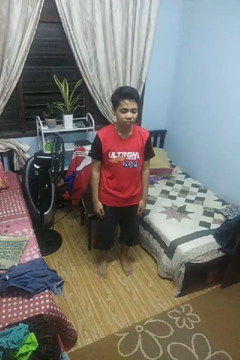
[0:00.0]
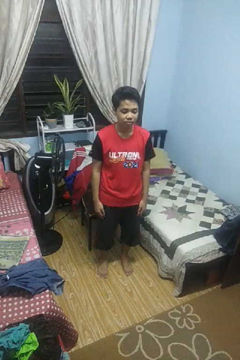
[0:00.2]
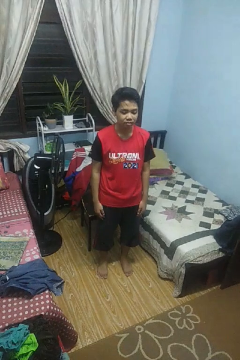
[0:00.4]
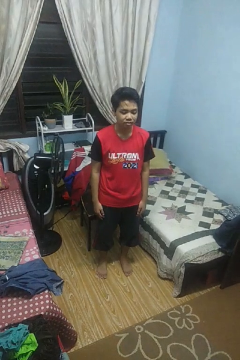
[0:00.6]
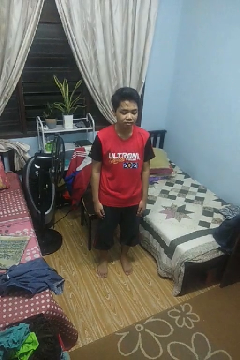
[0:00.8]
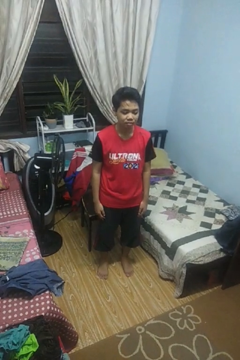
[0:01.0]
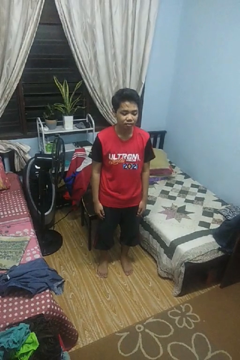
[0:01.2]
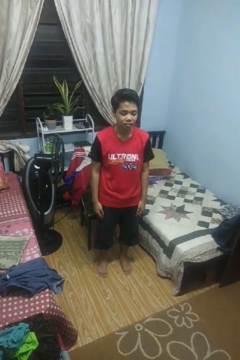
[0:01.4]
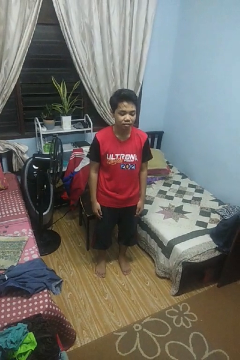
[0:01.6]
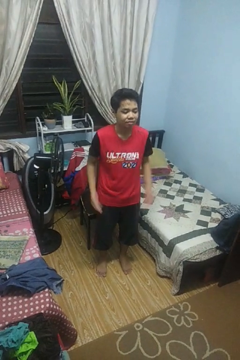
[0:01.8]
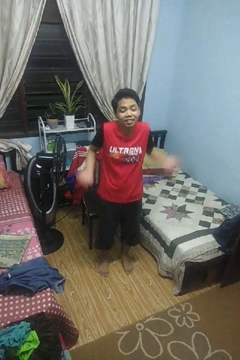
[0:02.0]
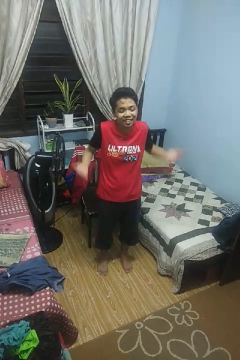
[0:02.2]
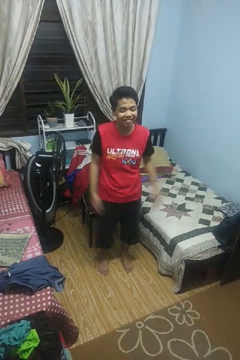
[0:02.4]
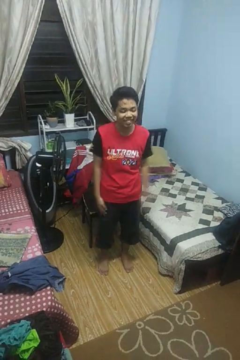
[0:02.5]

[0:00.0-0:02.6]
person shrugs

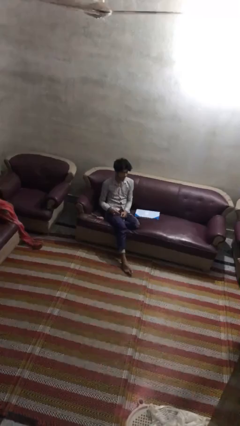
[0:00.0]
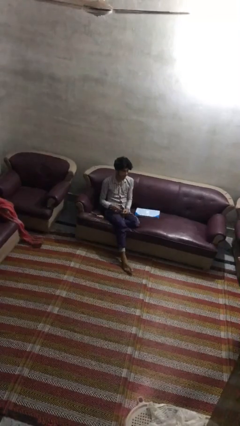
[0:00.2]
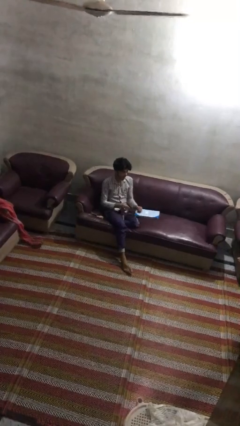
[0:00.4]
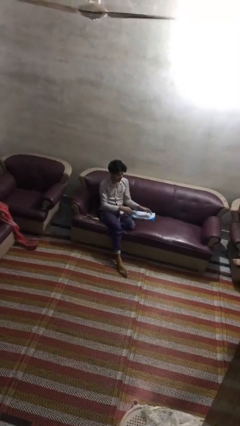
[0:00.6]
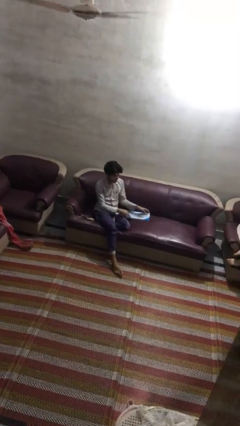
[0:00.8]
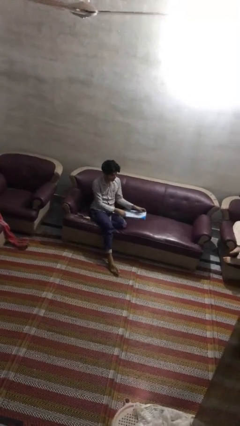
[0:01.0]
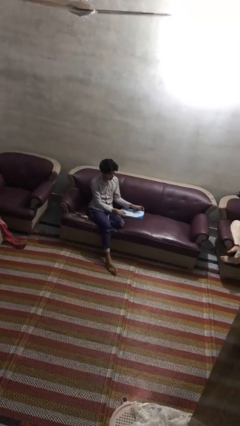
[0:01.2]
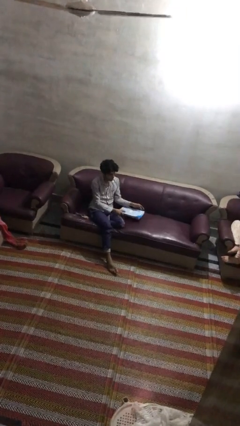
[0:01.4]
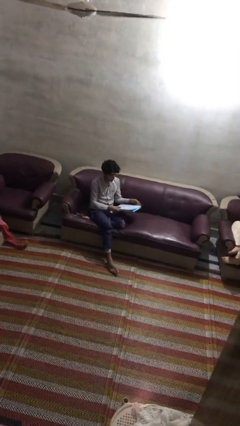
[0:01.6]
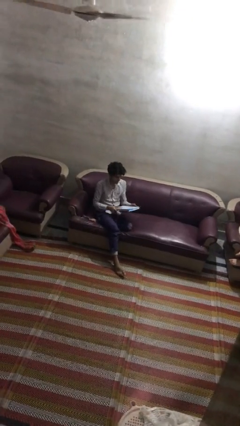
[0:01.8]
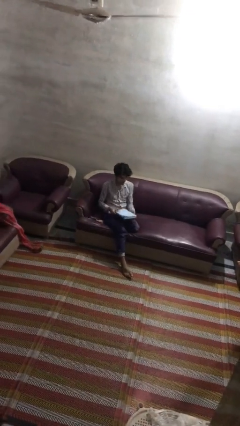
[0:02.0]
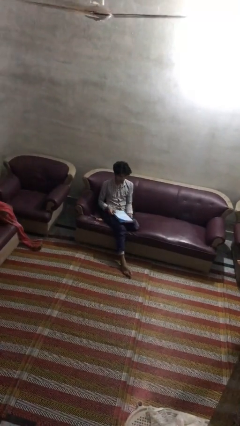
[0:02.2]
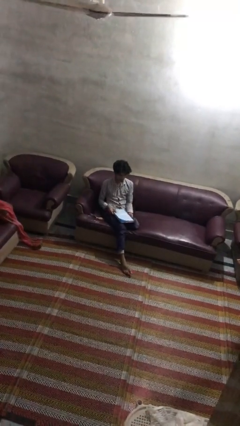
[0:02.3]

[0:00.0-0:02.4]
person picks up object from couch

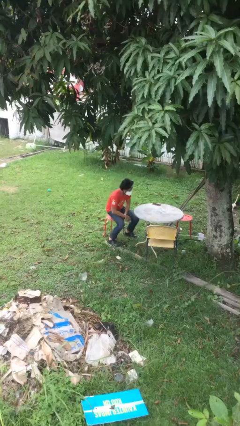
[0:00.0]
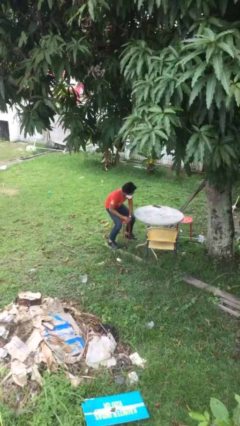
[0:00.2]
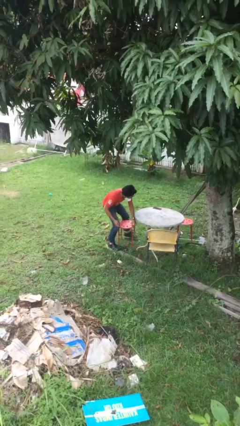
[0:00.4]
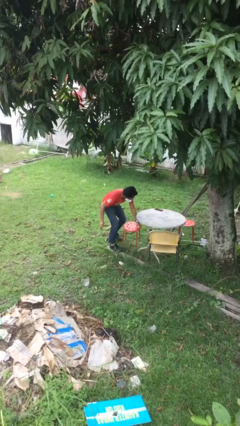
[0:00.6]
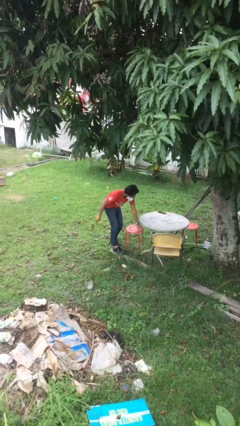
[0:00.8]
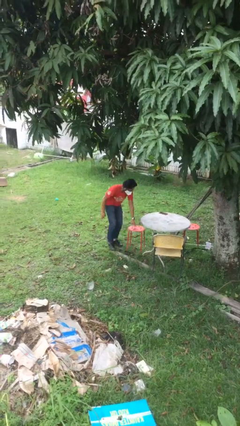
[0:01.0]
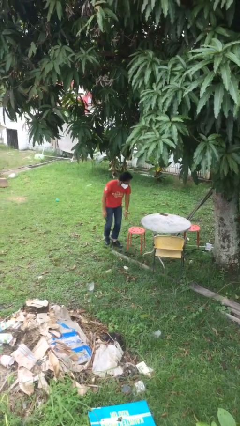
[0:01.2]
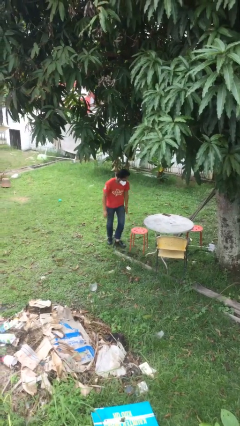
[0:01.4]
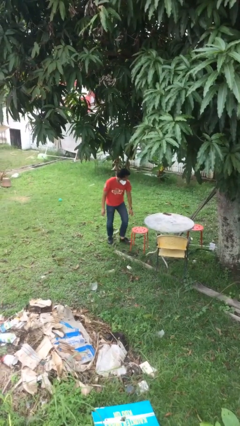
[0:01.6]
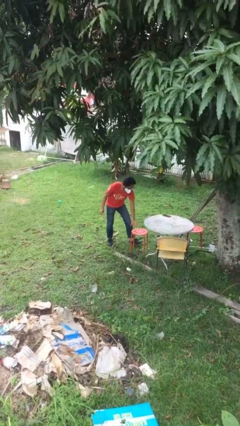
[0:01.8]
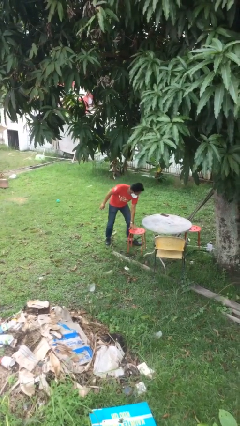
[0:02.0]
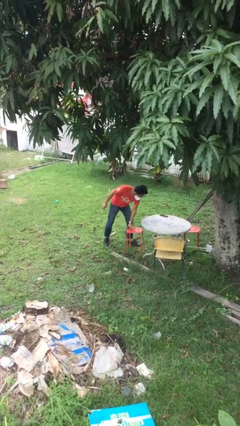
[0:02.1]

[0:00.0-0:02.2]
person stands up

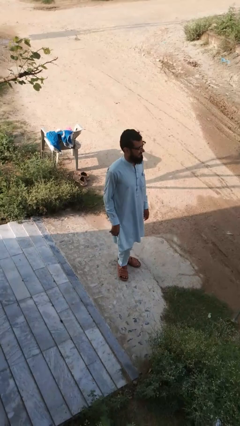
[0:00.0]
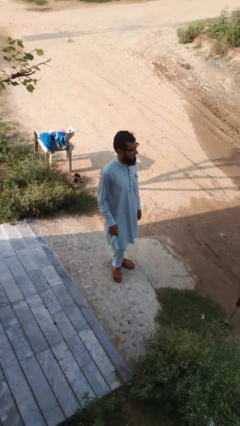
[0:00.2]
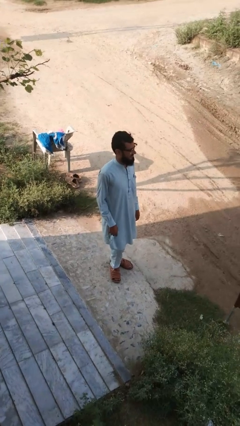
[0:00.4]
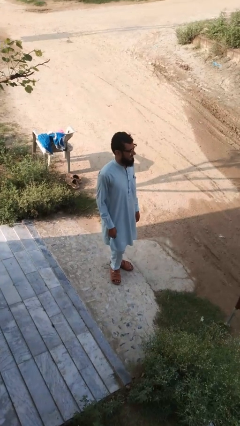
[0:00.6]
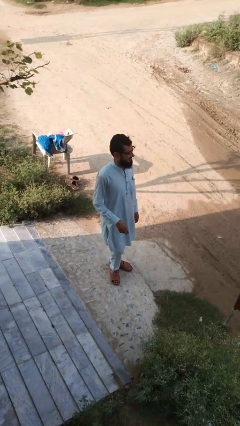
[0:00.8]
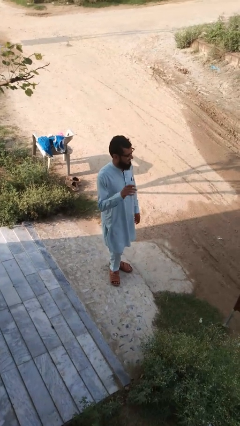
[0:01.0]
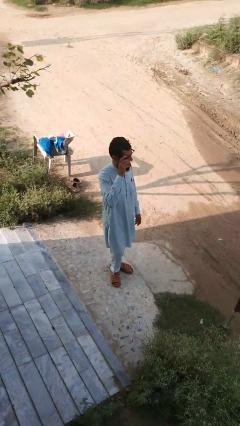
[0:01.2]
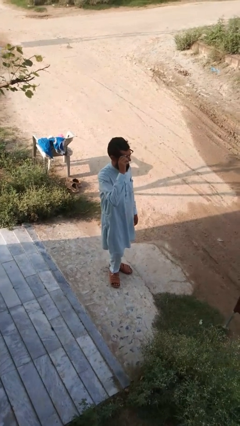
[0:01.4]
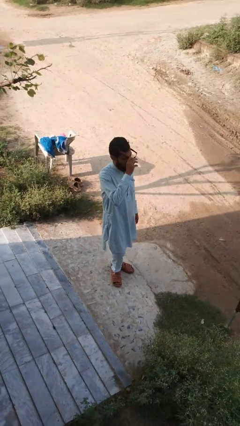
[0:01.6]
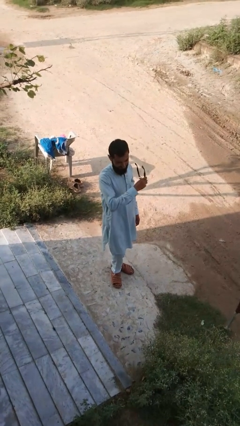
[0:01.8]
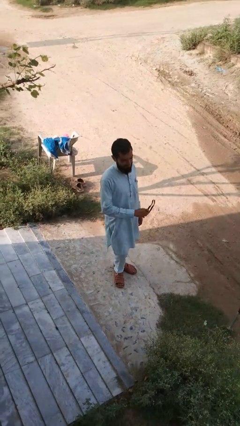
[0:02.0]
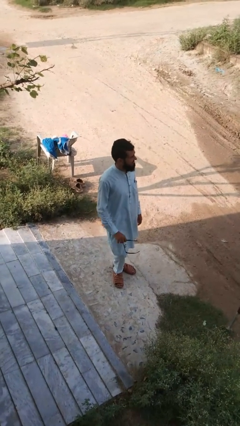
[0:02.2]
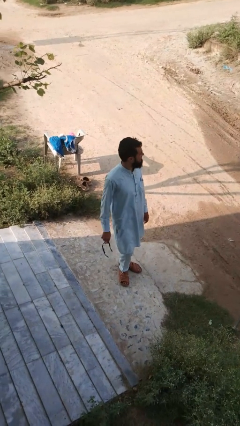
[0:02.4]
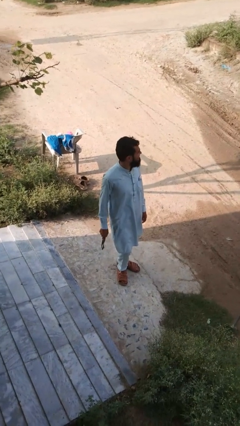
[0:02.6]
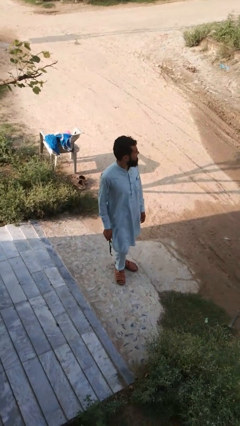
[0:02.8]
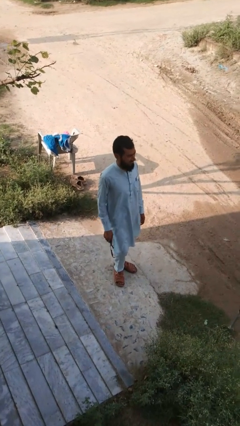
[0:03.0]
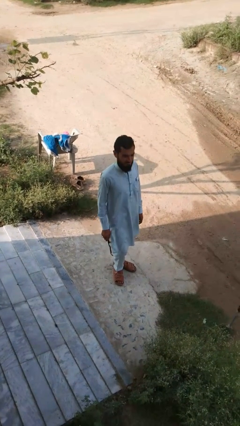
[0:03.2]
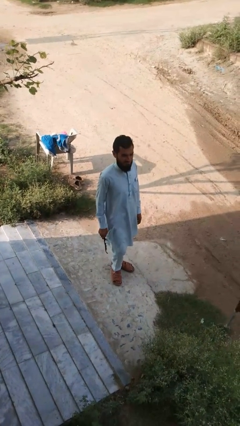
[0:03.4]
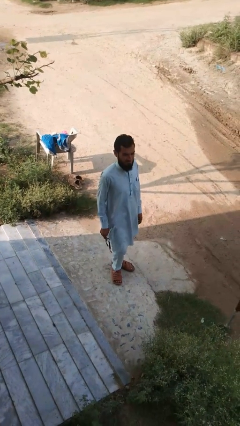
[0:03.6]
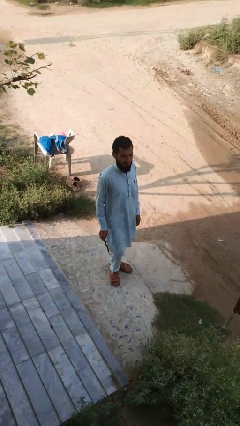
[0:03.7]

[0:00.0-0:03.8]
person takes off glasses

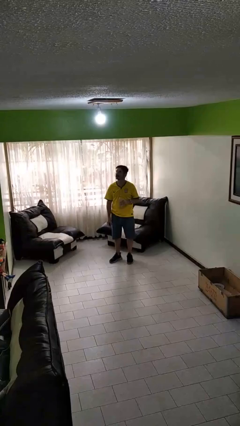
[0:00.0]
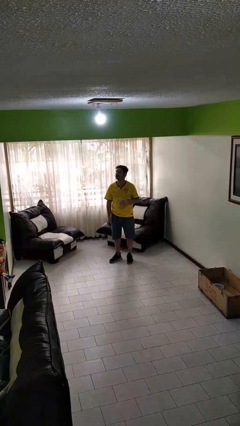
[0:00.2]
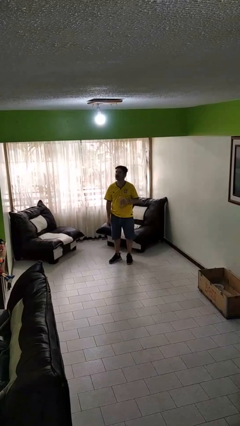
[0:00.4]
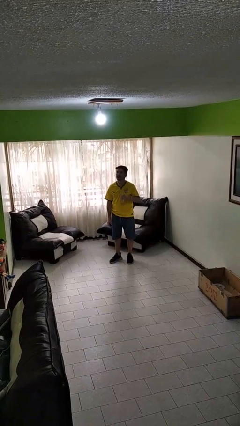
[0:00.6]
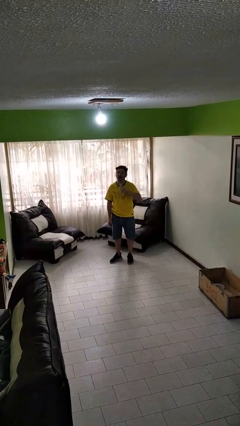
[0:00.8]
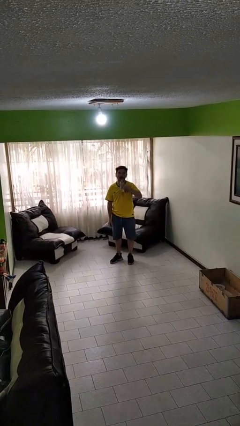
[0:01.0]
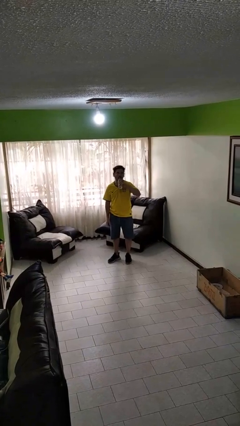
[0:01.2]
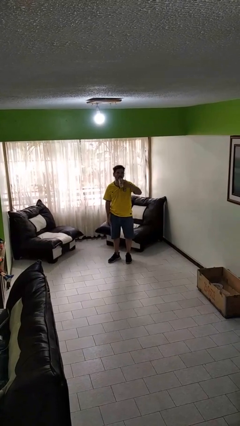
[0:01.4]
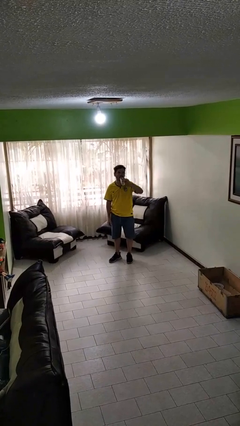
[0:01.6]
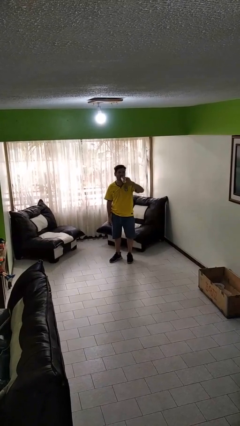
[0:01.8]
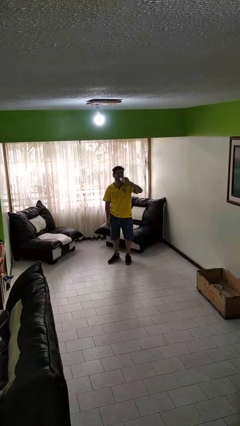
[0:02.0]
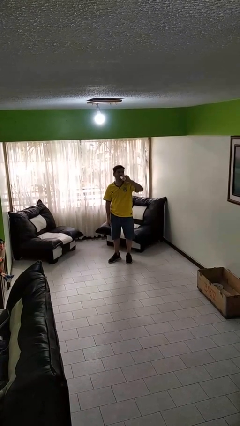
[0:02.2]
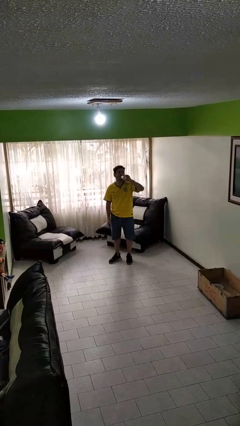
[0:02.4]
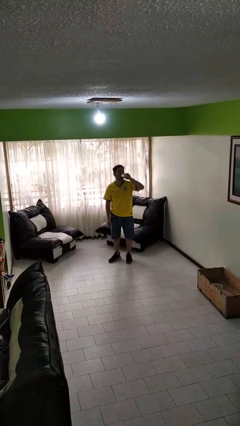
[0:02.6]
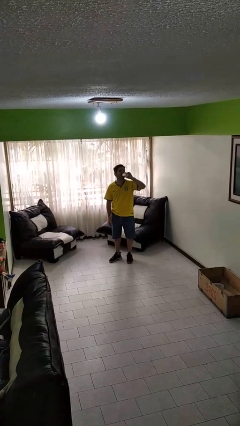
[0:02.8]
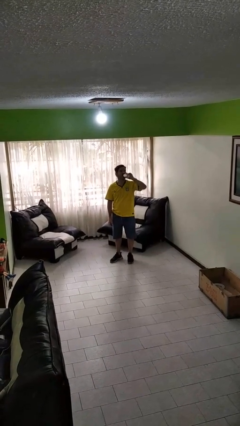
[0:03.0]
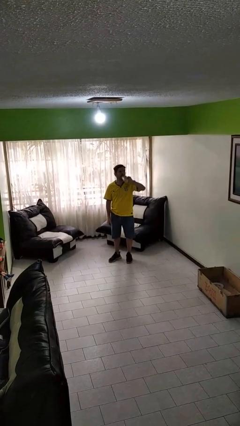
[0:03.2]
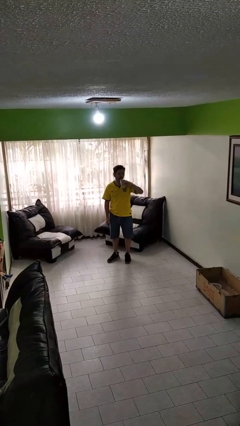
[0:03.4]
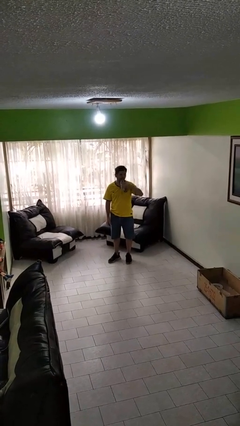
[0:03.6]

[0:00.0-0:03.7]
person drinks from bottle

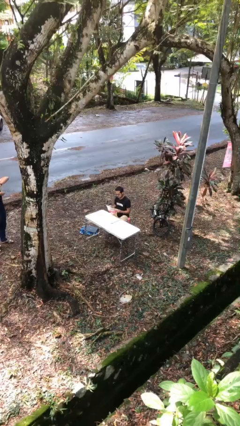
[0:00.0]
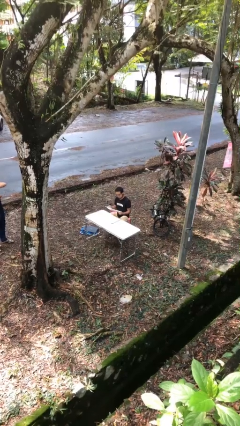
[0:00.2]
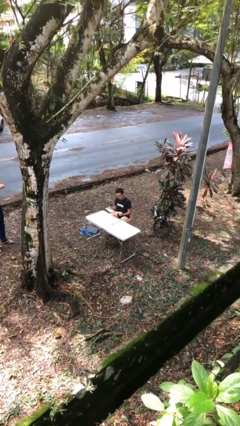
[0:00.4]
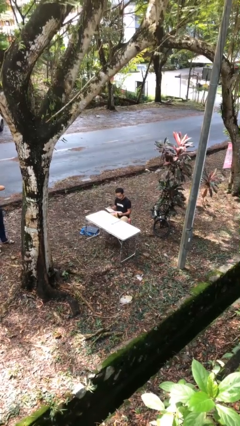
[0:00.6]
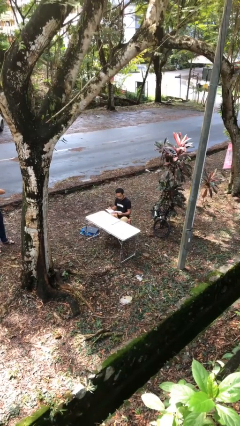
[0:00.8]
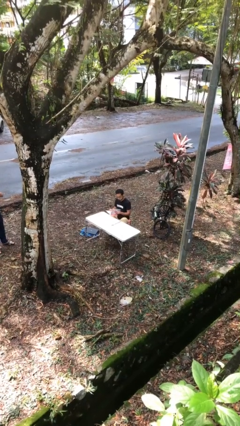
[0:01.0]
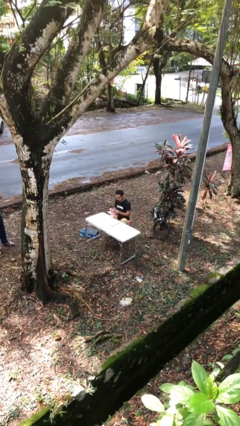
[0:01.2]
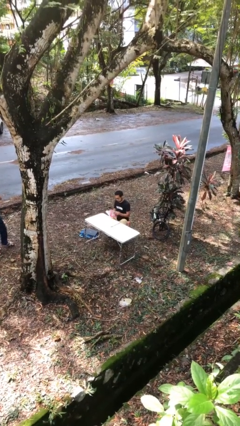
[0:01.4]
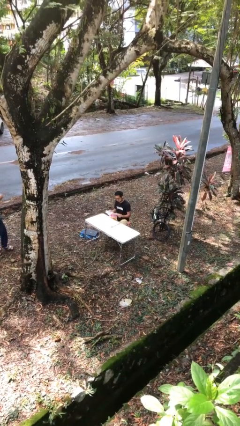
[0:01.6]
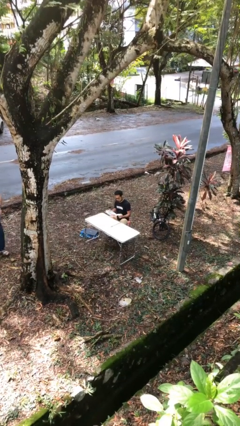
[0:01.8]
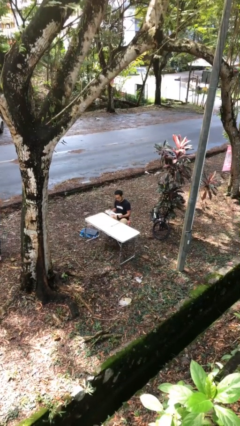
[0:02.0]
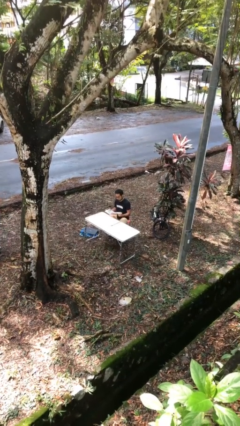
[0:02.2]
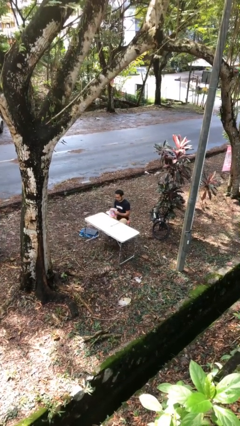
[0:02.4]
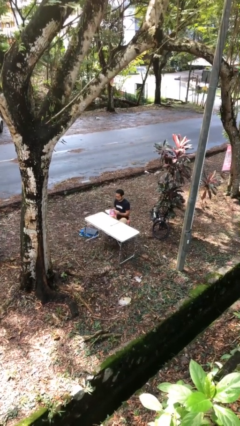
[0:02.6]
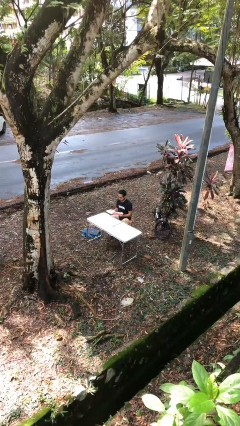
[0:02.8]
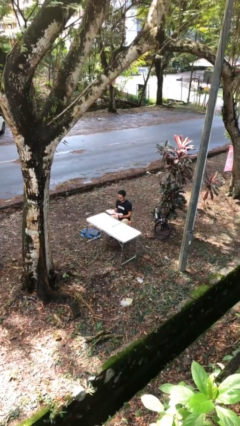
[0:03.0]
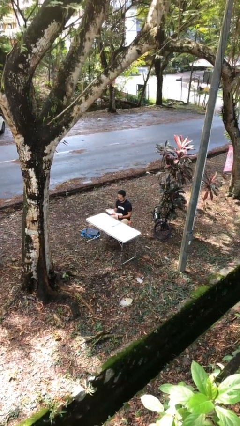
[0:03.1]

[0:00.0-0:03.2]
person reads document
